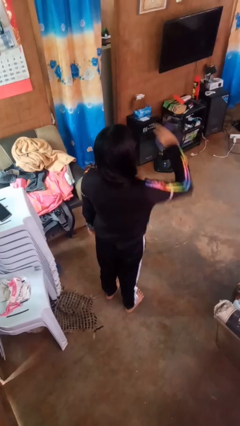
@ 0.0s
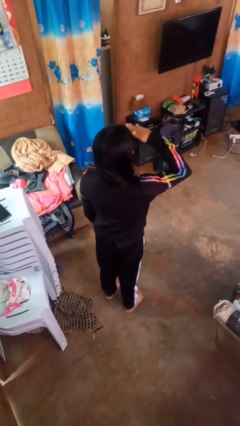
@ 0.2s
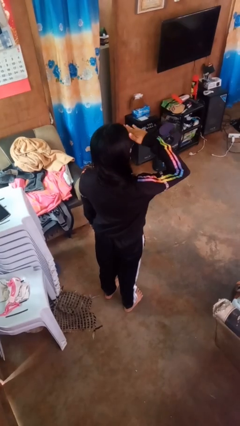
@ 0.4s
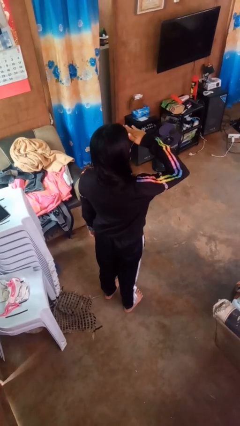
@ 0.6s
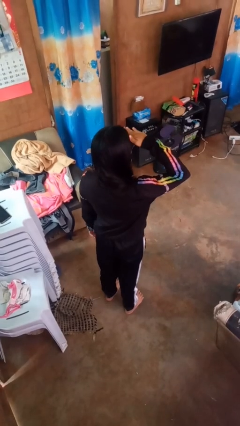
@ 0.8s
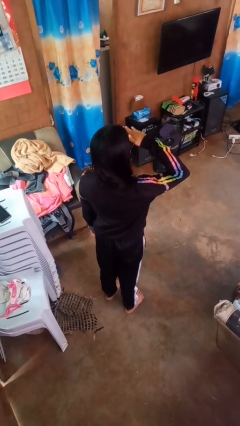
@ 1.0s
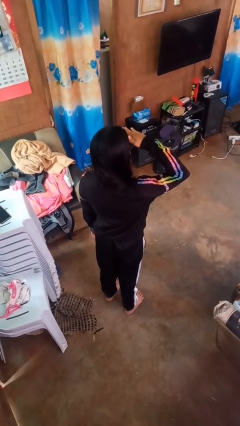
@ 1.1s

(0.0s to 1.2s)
person salutes

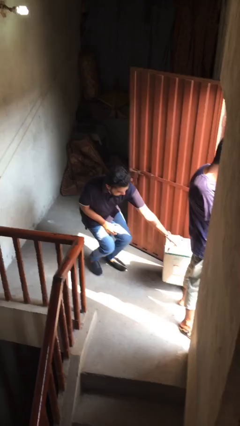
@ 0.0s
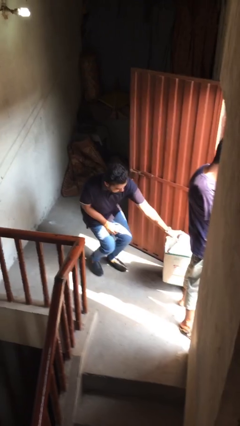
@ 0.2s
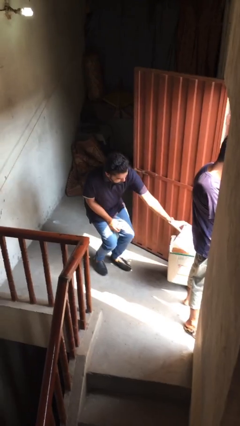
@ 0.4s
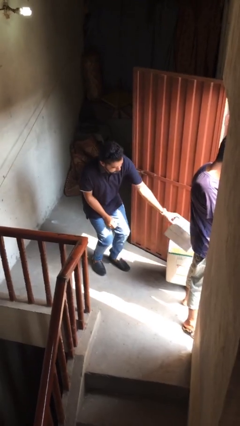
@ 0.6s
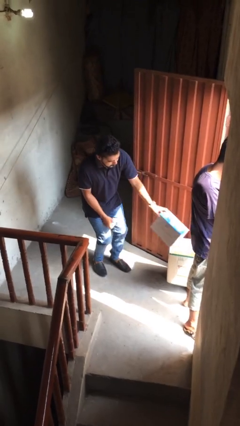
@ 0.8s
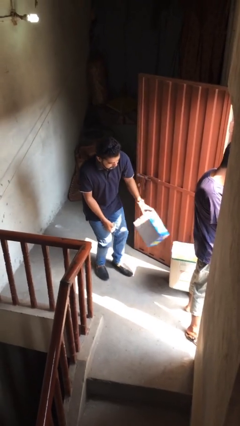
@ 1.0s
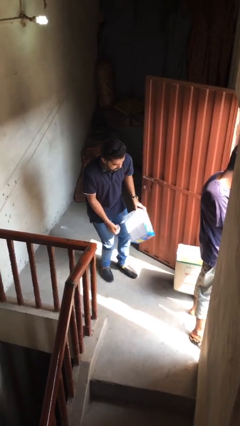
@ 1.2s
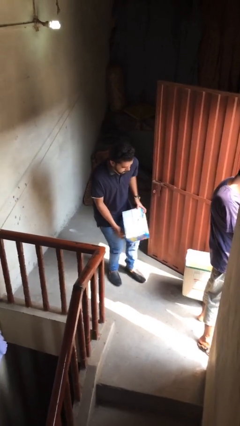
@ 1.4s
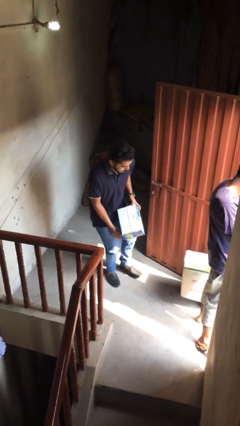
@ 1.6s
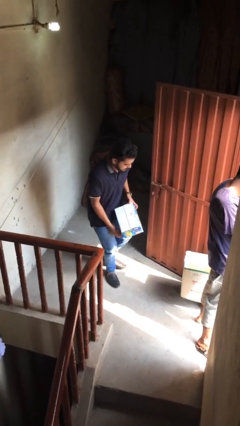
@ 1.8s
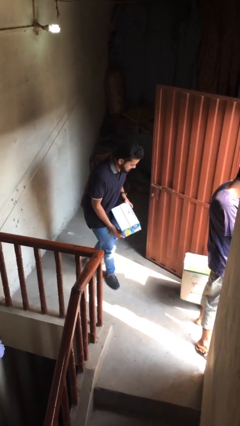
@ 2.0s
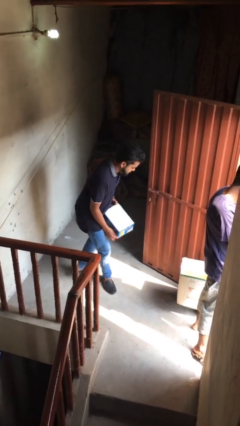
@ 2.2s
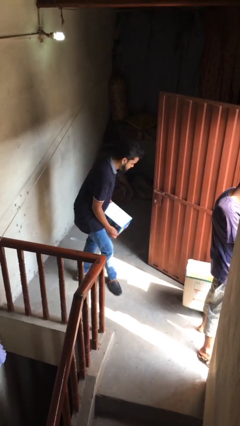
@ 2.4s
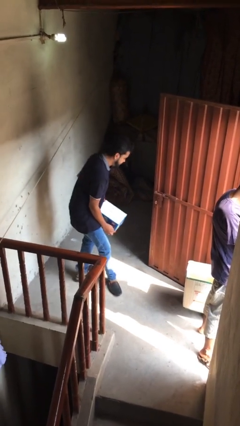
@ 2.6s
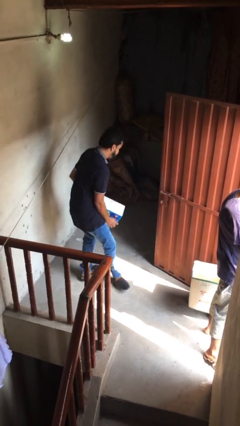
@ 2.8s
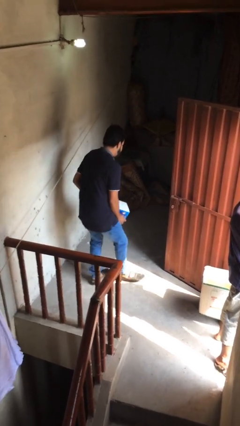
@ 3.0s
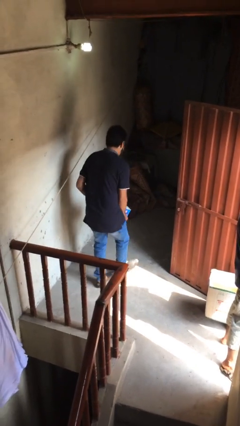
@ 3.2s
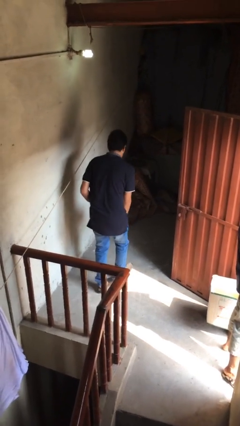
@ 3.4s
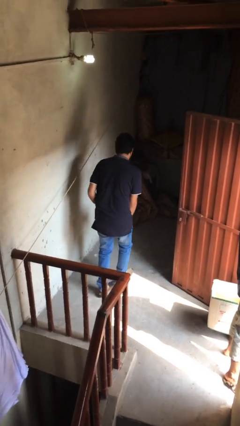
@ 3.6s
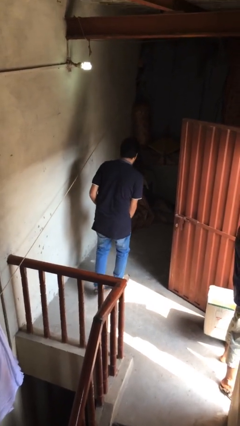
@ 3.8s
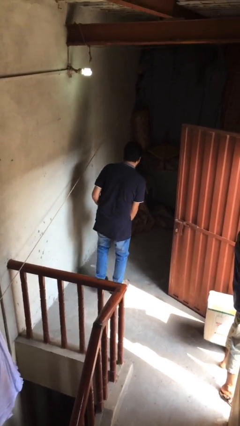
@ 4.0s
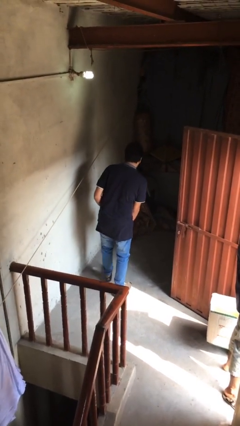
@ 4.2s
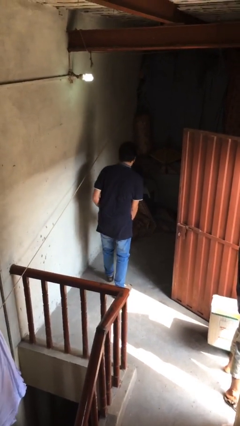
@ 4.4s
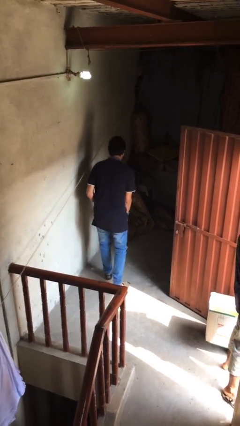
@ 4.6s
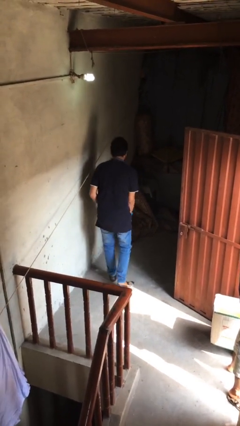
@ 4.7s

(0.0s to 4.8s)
person steals object from person

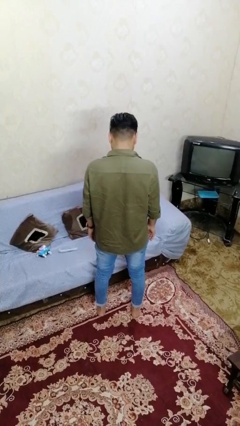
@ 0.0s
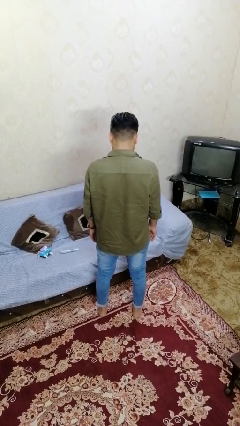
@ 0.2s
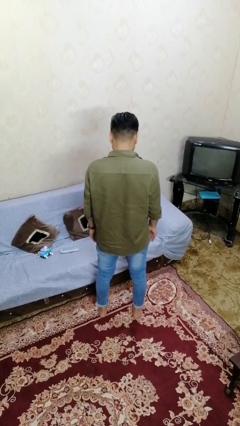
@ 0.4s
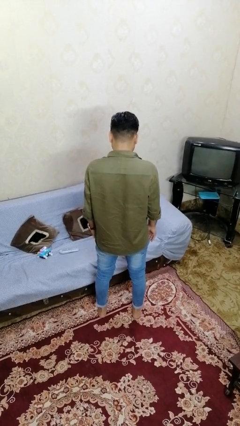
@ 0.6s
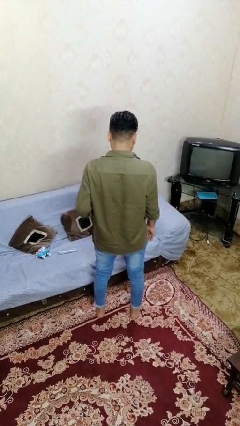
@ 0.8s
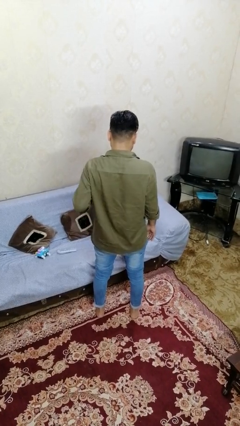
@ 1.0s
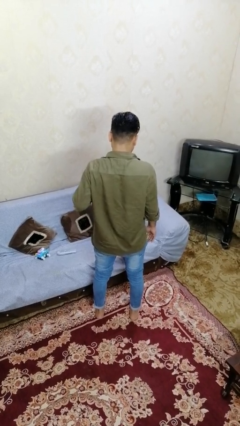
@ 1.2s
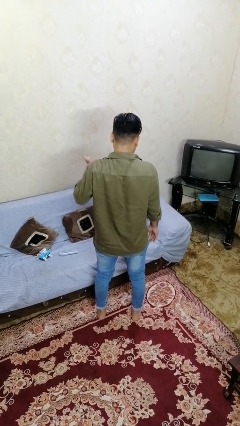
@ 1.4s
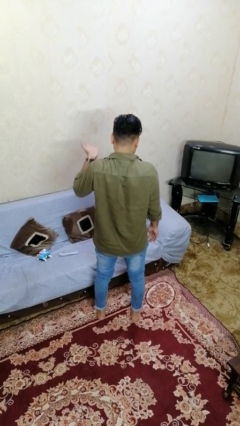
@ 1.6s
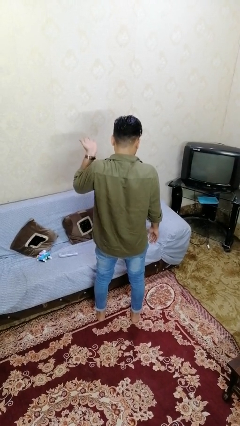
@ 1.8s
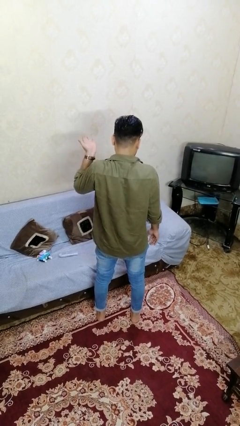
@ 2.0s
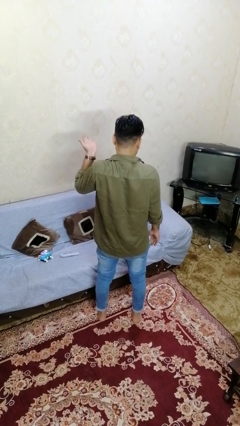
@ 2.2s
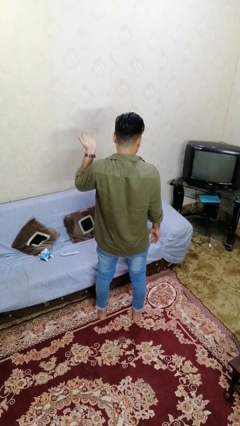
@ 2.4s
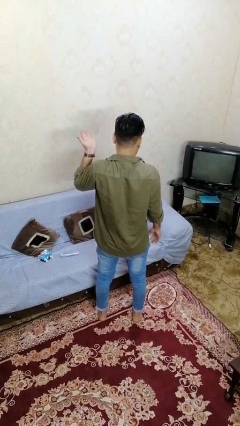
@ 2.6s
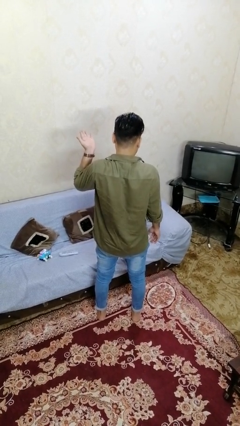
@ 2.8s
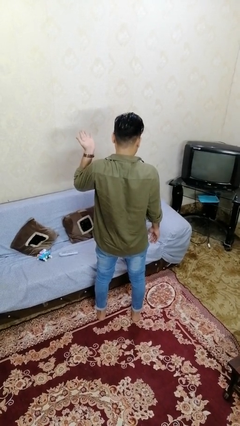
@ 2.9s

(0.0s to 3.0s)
person gestures swipe up

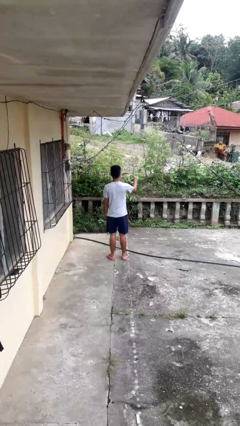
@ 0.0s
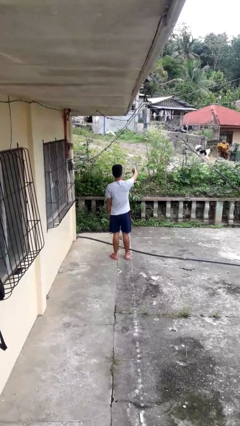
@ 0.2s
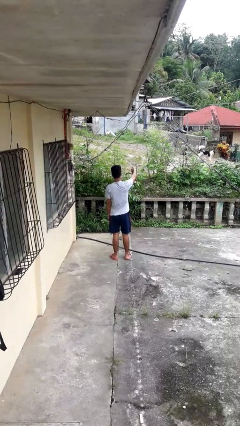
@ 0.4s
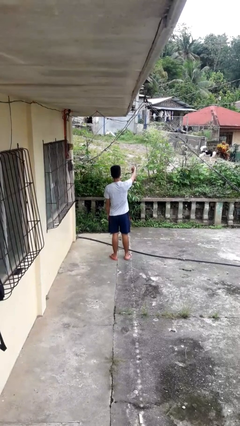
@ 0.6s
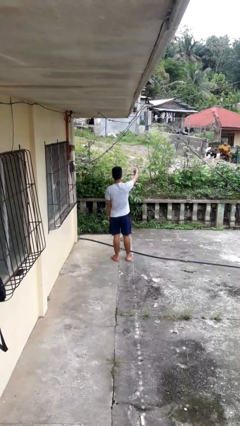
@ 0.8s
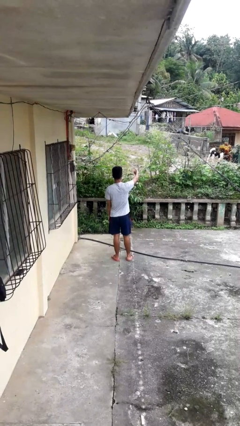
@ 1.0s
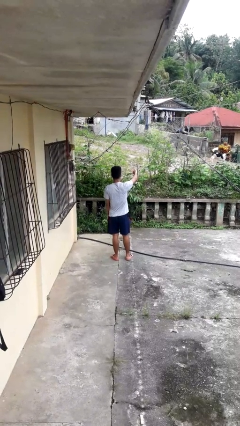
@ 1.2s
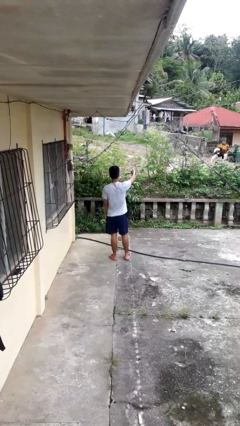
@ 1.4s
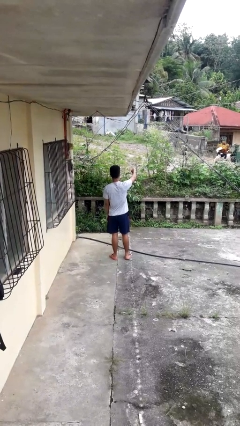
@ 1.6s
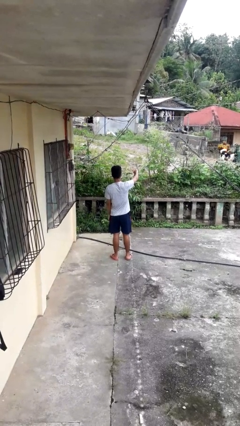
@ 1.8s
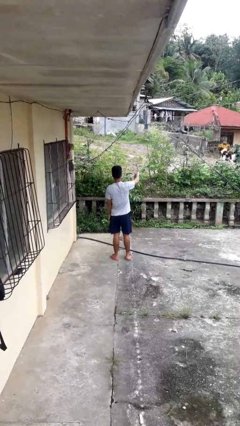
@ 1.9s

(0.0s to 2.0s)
person gestures thumbs down

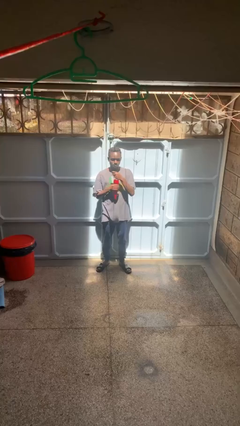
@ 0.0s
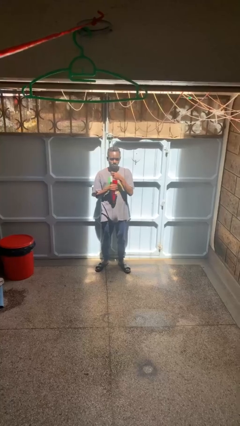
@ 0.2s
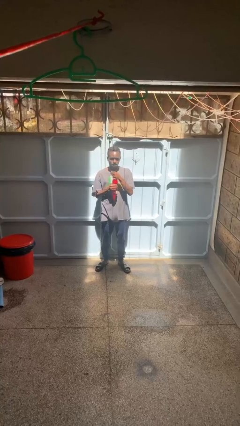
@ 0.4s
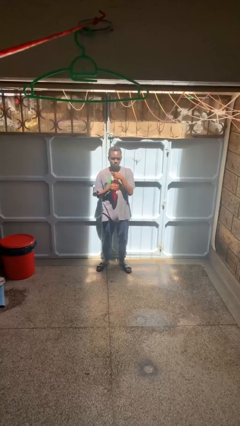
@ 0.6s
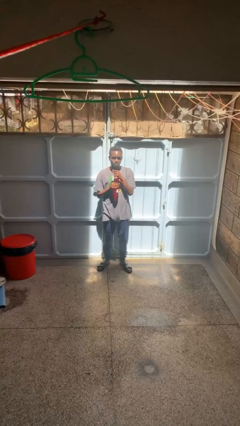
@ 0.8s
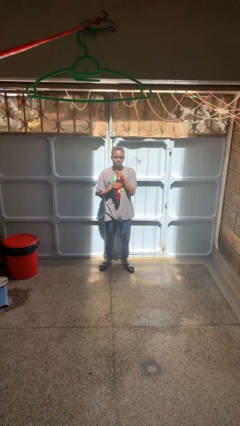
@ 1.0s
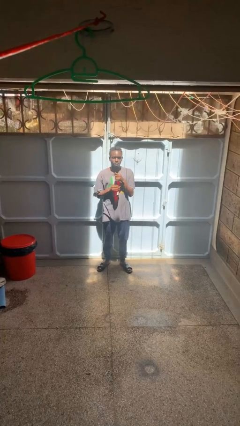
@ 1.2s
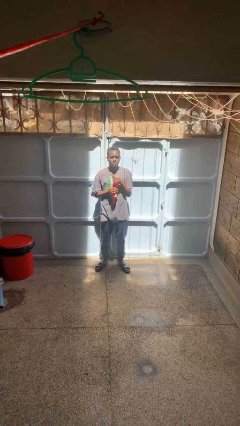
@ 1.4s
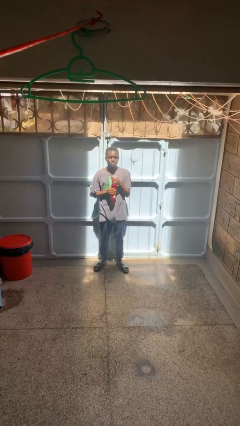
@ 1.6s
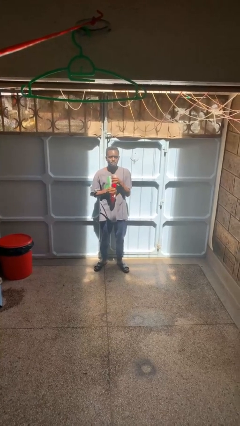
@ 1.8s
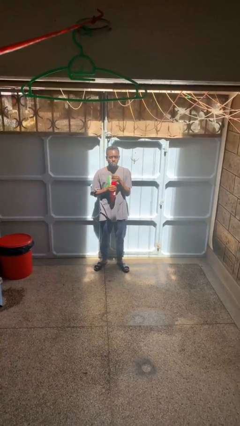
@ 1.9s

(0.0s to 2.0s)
person opens beverage can

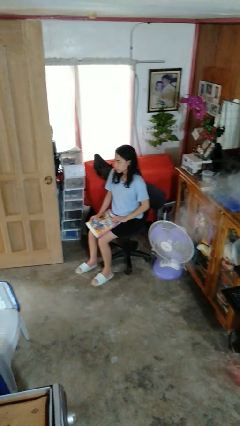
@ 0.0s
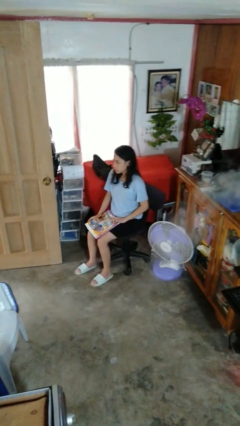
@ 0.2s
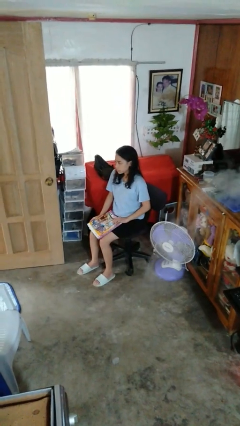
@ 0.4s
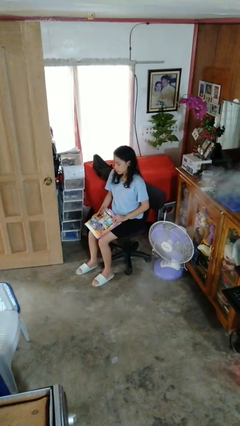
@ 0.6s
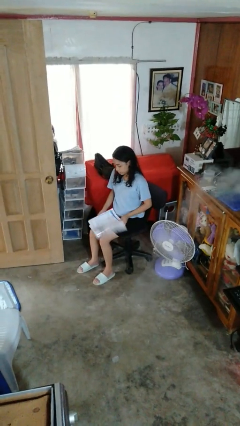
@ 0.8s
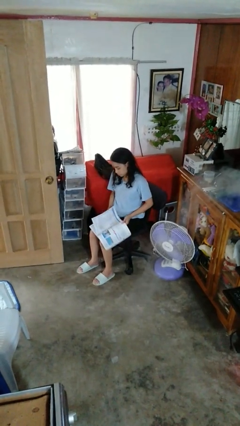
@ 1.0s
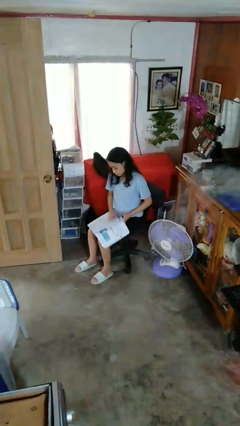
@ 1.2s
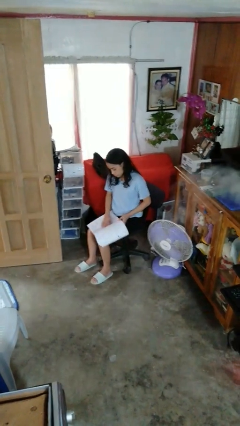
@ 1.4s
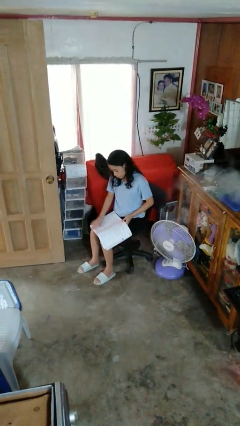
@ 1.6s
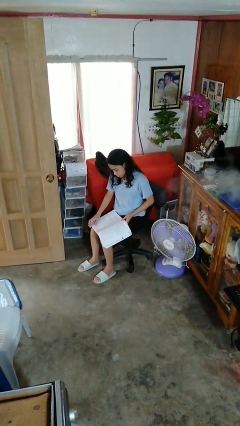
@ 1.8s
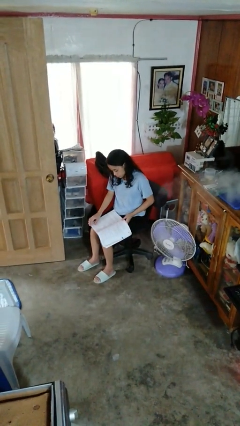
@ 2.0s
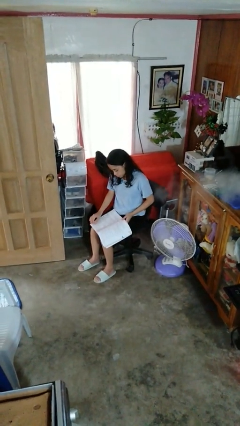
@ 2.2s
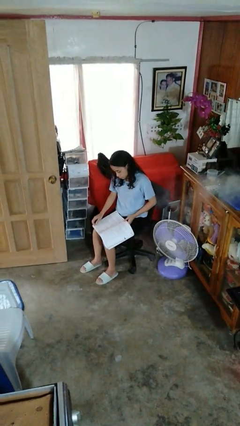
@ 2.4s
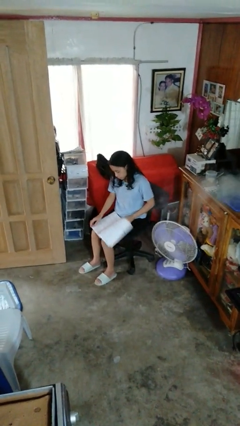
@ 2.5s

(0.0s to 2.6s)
person reads book

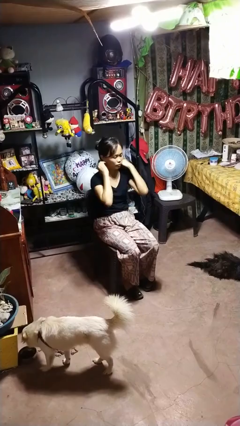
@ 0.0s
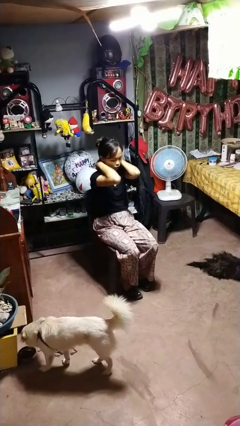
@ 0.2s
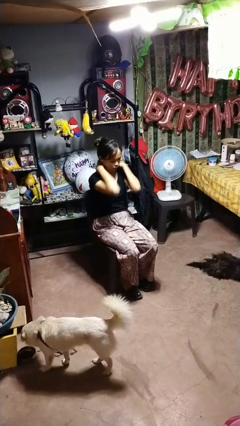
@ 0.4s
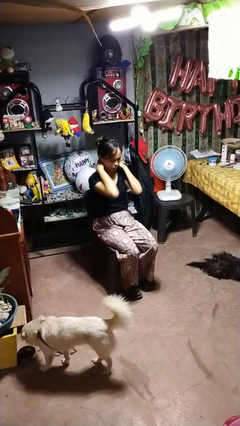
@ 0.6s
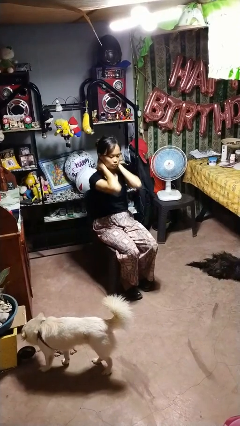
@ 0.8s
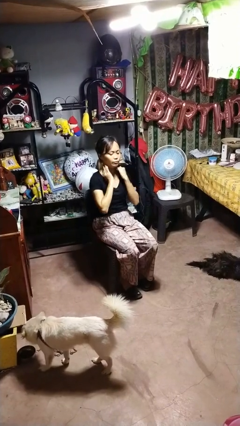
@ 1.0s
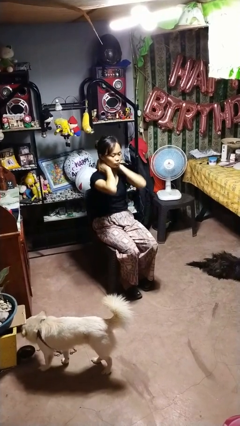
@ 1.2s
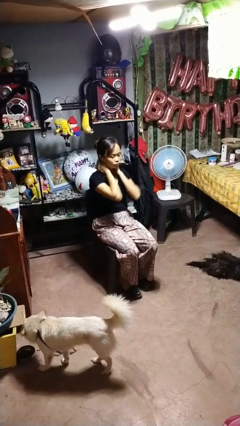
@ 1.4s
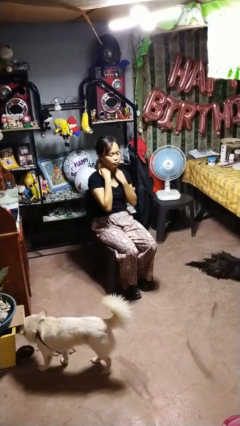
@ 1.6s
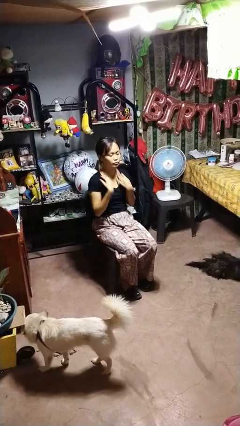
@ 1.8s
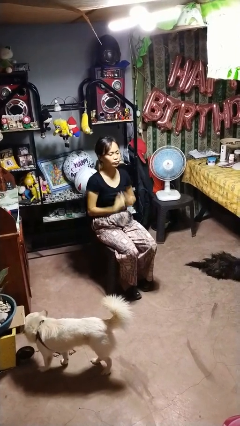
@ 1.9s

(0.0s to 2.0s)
person rubs neck
